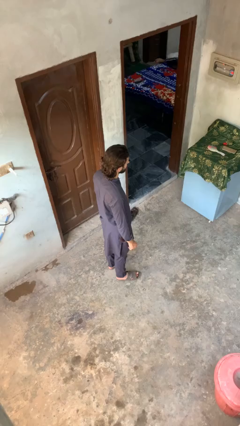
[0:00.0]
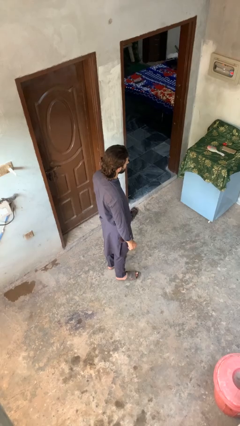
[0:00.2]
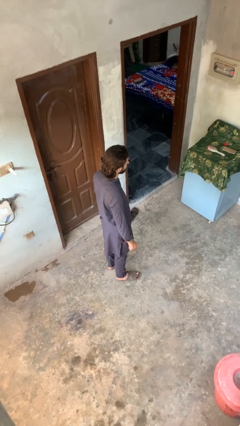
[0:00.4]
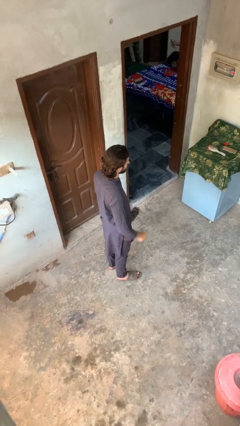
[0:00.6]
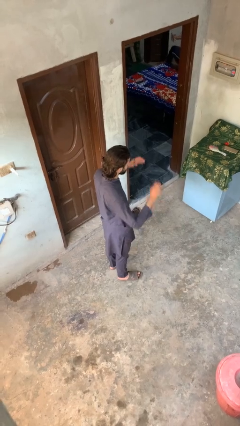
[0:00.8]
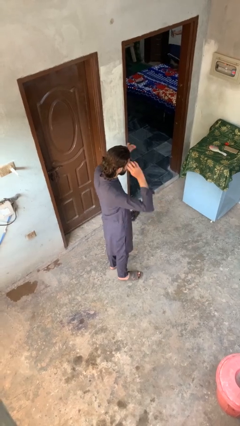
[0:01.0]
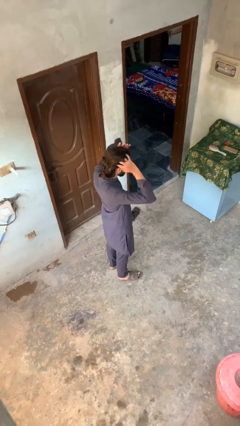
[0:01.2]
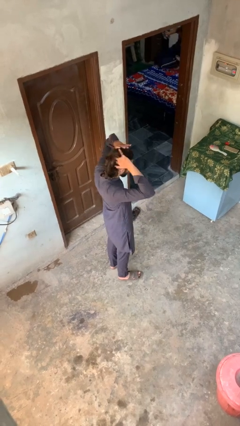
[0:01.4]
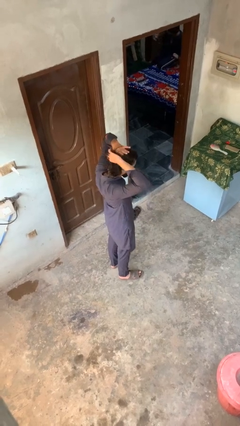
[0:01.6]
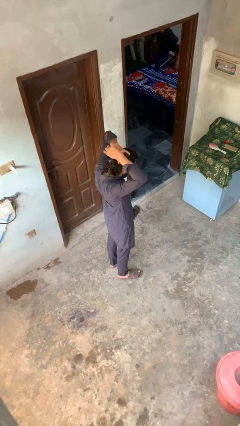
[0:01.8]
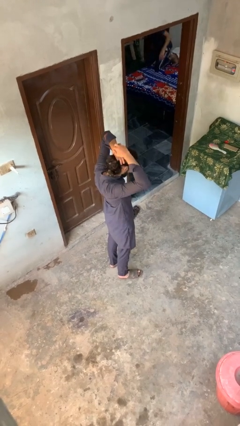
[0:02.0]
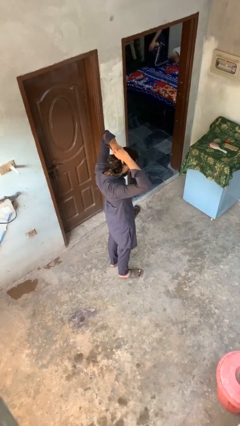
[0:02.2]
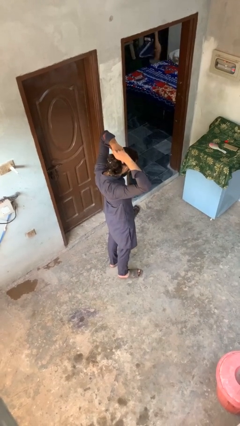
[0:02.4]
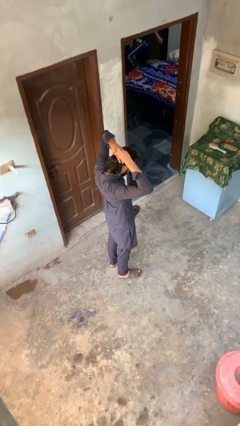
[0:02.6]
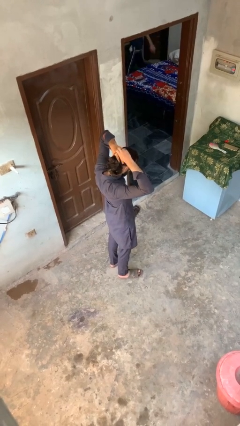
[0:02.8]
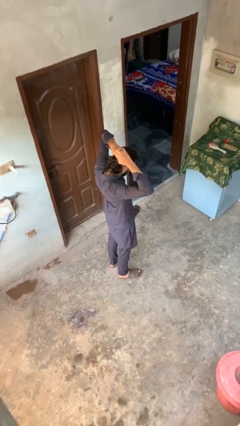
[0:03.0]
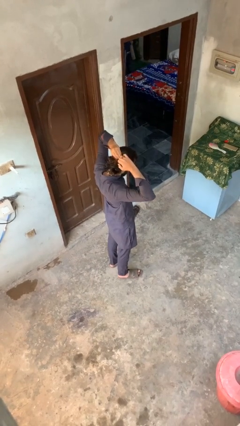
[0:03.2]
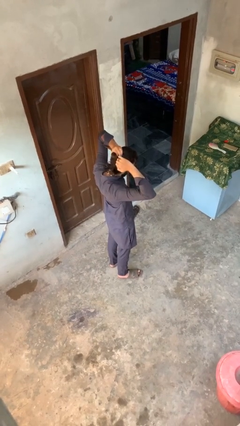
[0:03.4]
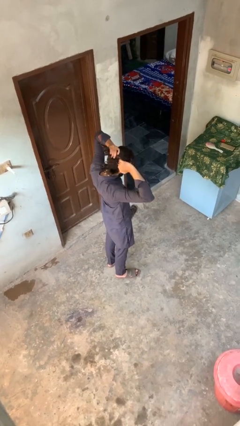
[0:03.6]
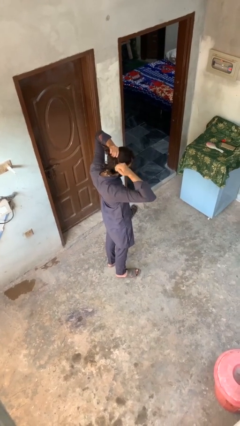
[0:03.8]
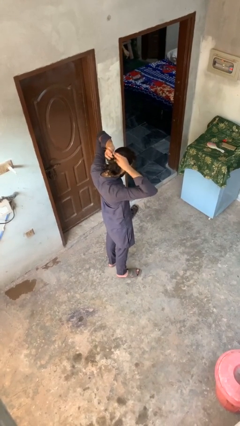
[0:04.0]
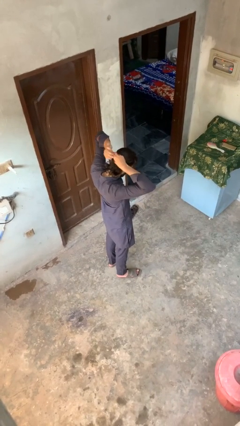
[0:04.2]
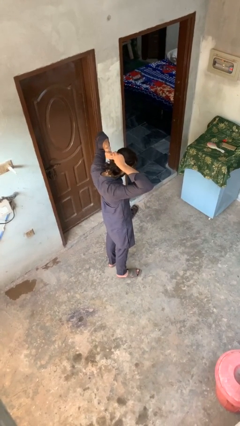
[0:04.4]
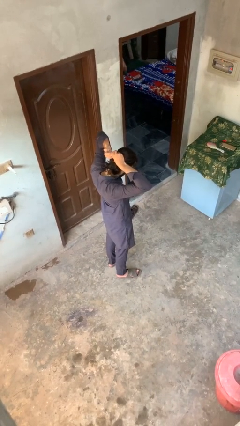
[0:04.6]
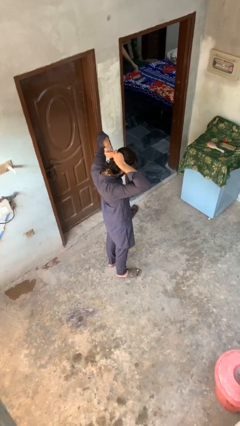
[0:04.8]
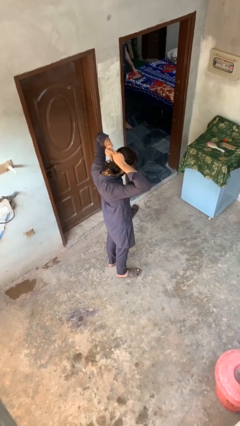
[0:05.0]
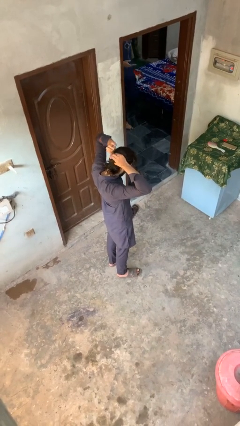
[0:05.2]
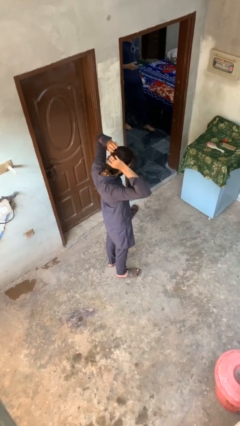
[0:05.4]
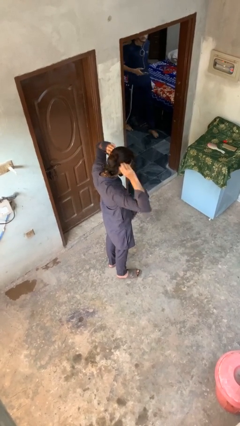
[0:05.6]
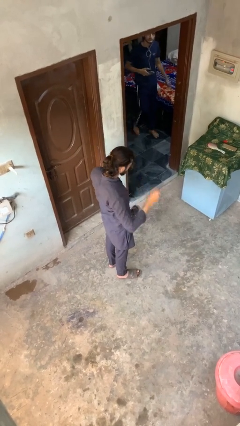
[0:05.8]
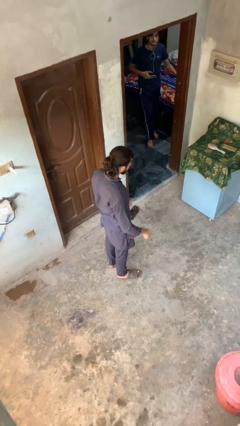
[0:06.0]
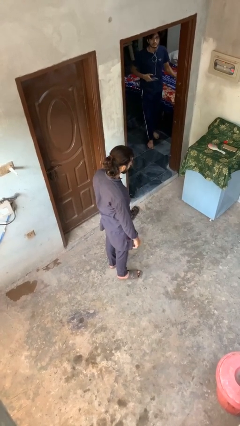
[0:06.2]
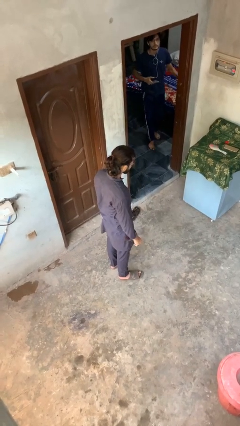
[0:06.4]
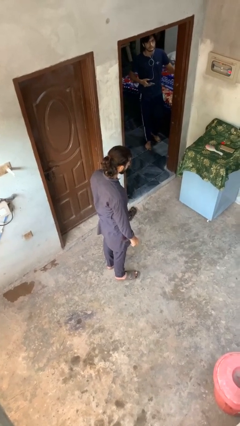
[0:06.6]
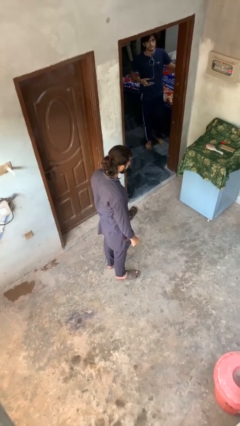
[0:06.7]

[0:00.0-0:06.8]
person puts hair in ponytail

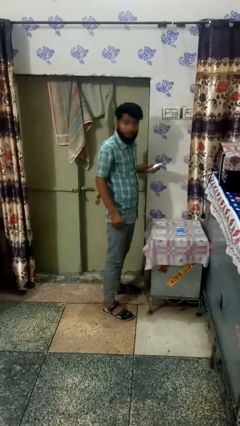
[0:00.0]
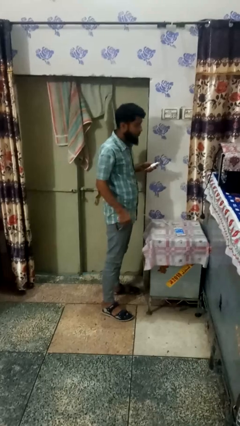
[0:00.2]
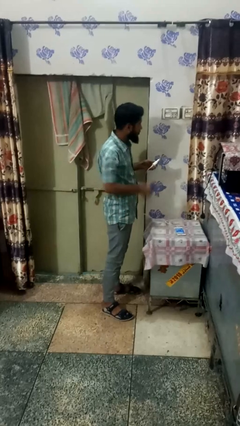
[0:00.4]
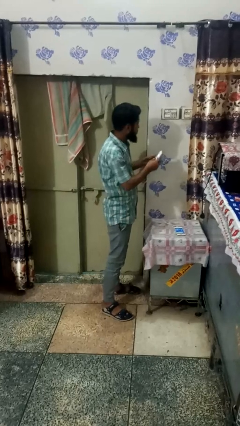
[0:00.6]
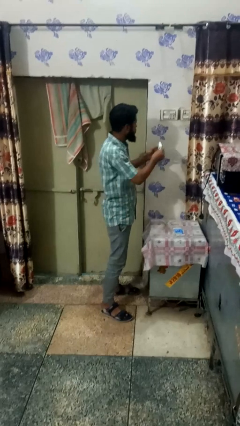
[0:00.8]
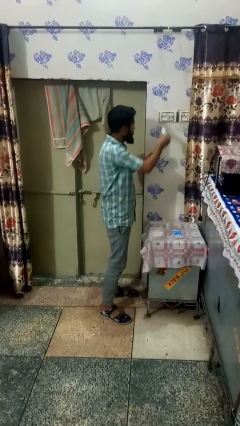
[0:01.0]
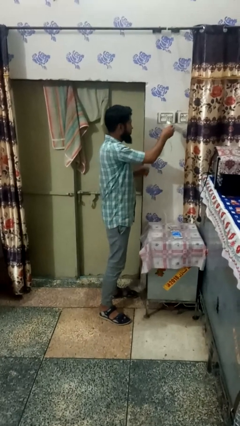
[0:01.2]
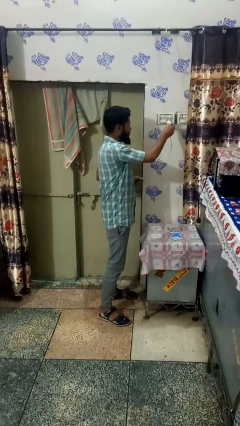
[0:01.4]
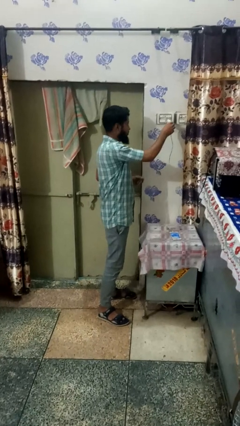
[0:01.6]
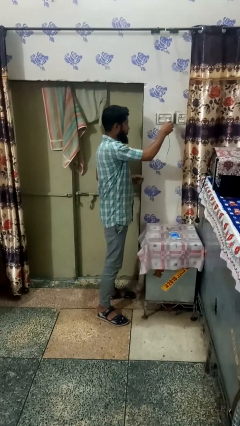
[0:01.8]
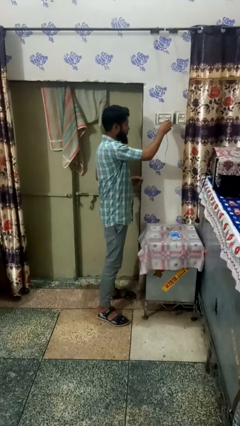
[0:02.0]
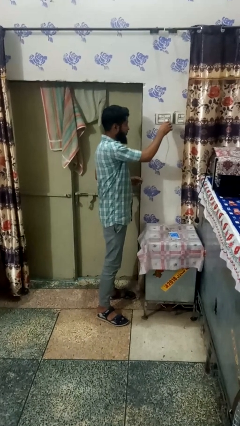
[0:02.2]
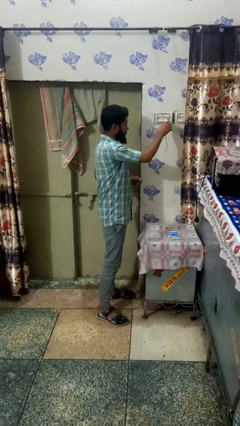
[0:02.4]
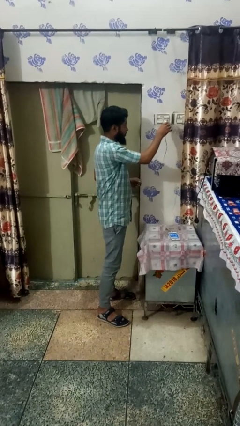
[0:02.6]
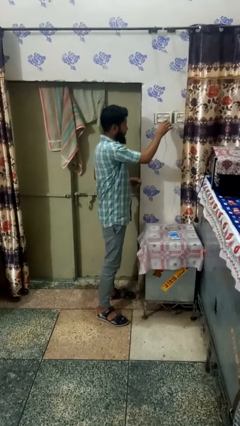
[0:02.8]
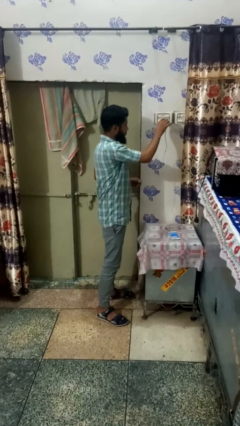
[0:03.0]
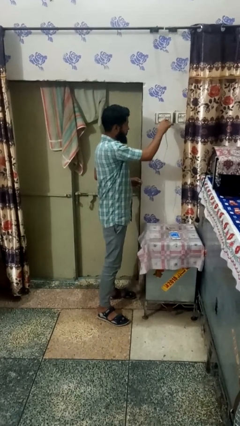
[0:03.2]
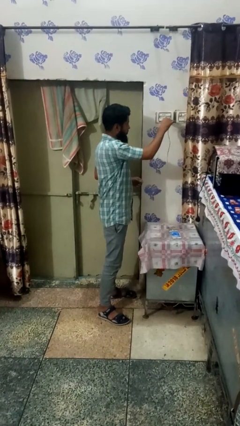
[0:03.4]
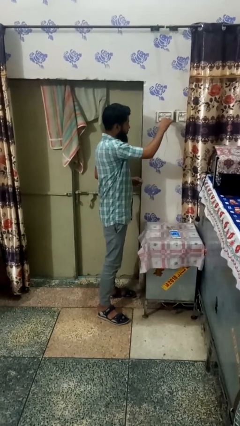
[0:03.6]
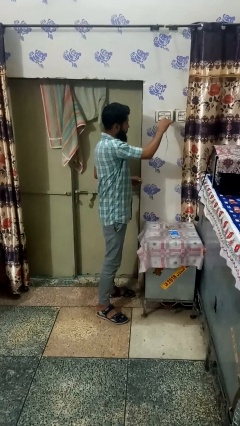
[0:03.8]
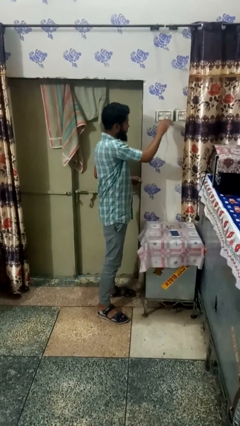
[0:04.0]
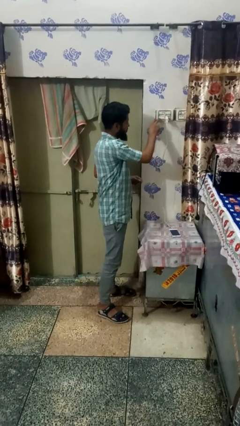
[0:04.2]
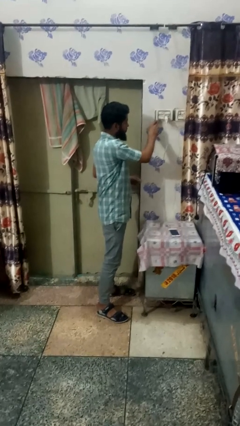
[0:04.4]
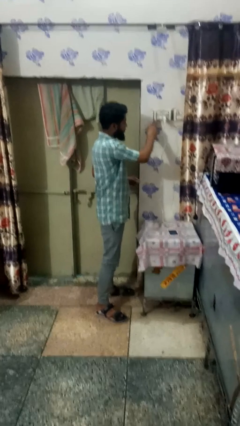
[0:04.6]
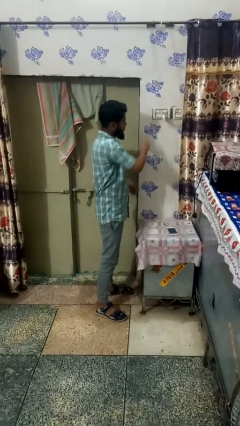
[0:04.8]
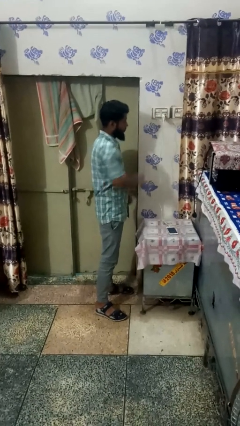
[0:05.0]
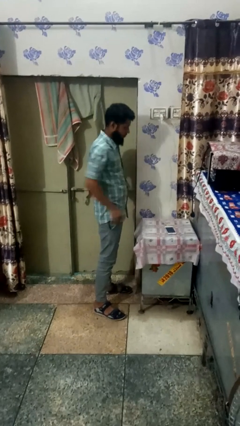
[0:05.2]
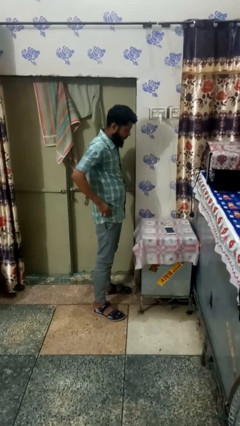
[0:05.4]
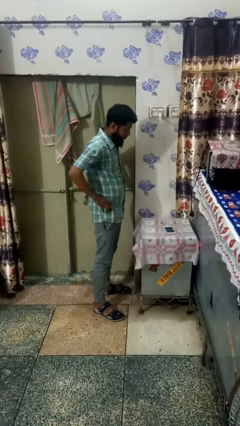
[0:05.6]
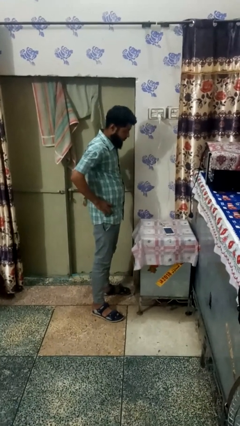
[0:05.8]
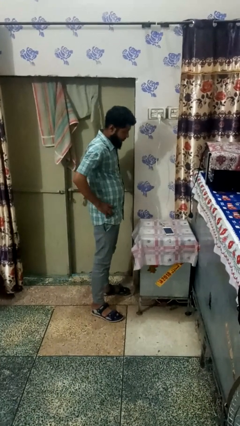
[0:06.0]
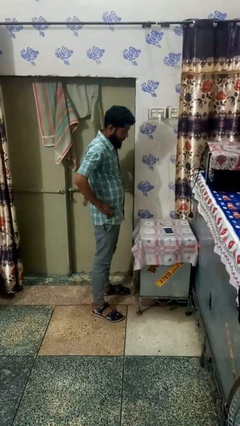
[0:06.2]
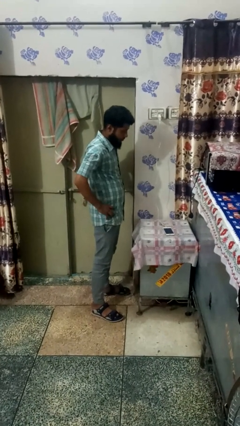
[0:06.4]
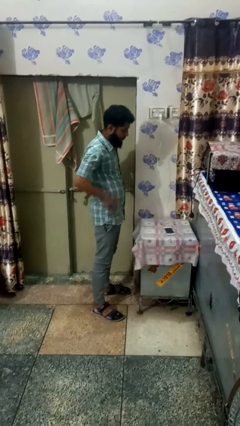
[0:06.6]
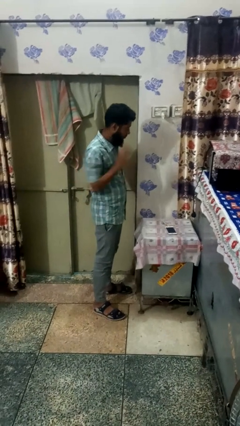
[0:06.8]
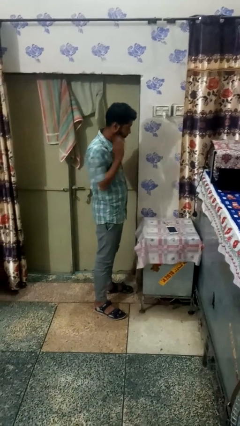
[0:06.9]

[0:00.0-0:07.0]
person plugs into electrical socket

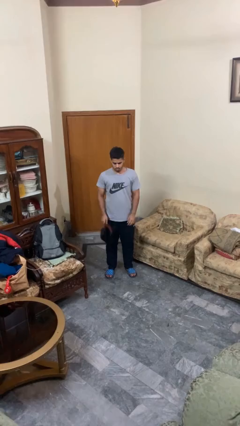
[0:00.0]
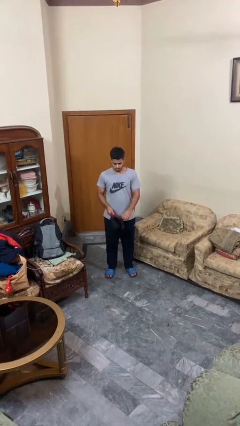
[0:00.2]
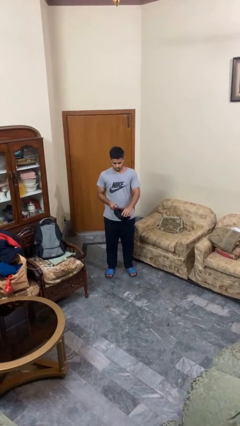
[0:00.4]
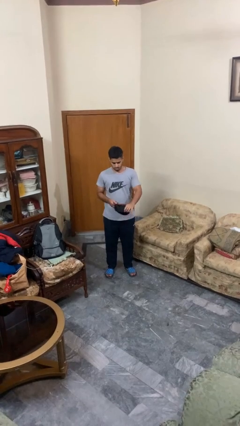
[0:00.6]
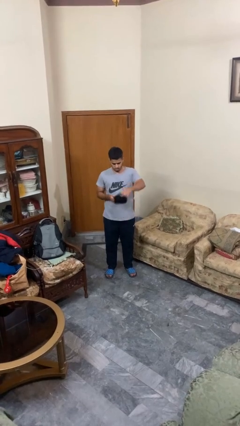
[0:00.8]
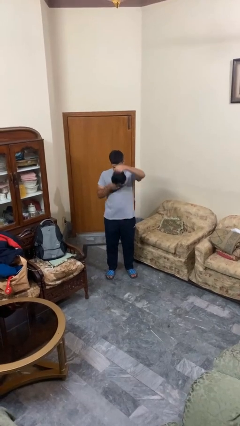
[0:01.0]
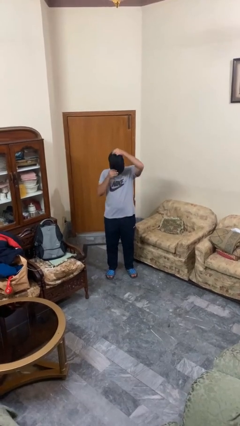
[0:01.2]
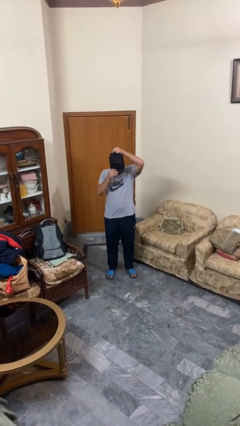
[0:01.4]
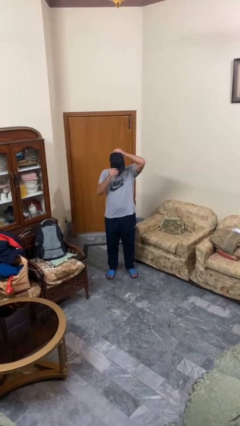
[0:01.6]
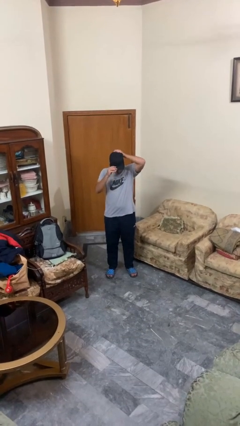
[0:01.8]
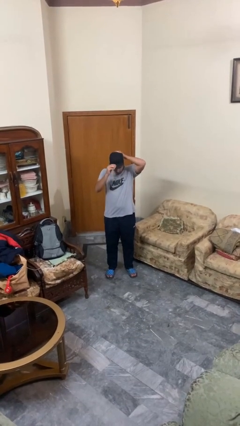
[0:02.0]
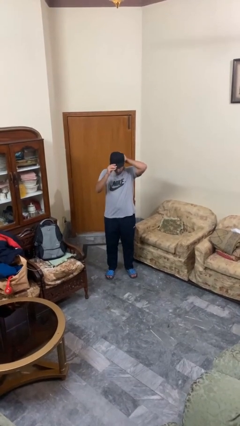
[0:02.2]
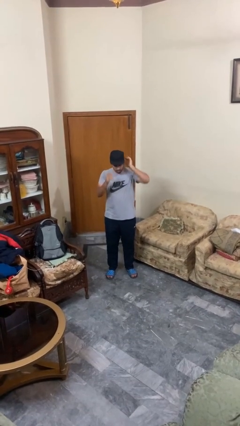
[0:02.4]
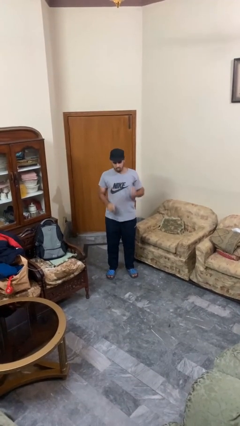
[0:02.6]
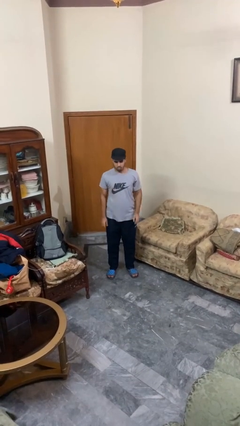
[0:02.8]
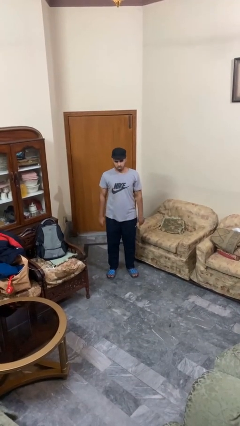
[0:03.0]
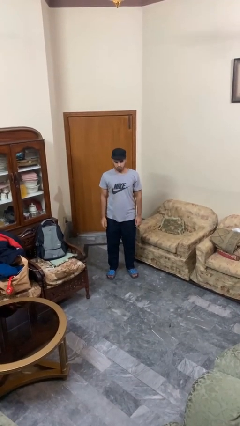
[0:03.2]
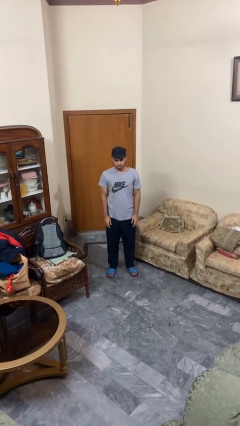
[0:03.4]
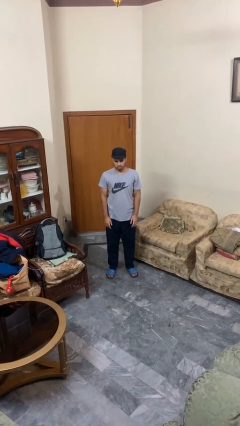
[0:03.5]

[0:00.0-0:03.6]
person puts on hat

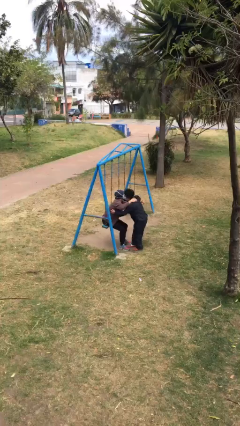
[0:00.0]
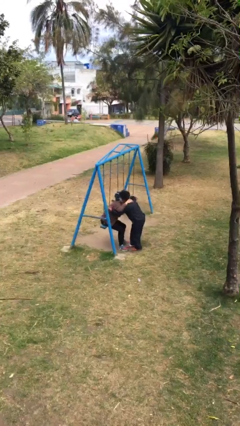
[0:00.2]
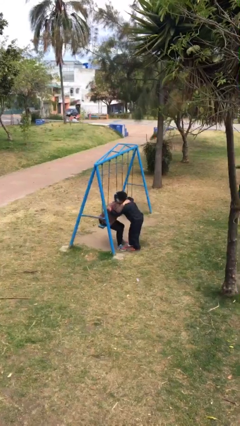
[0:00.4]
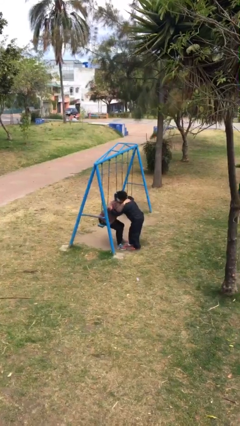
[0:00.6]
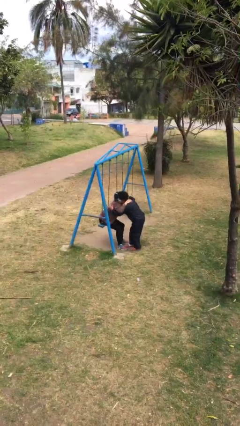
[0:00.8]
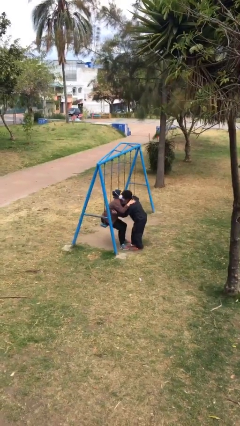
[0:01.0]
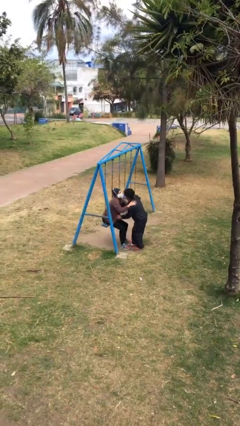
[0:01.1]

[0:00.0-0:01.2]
person embraces person
